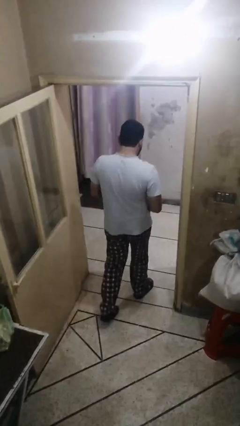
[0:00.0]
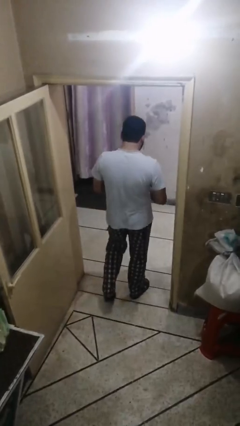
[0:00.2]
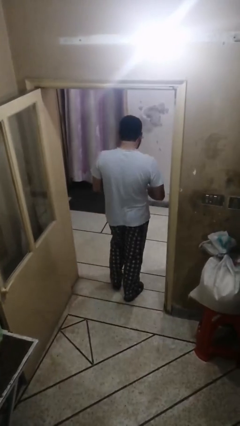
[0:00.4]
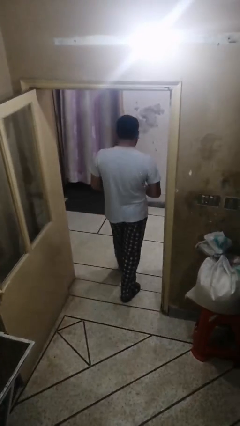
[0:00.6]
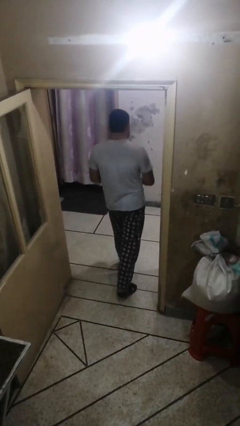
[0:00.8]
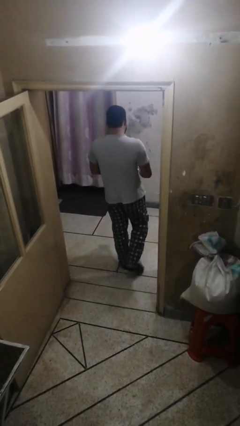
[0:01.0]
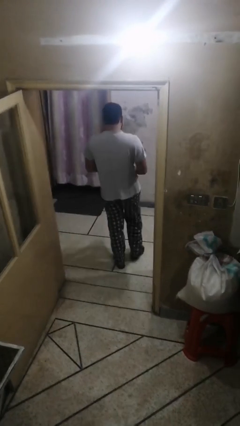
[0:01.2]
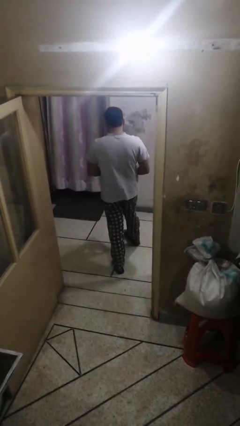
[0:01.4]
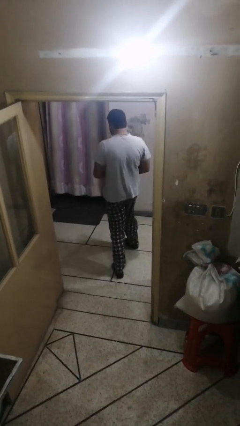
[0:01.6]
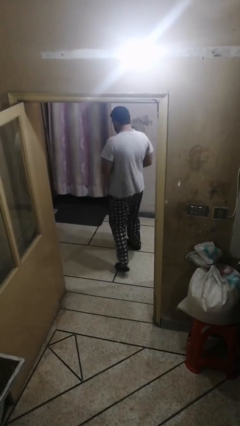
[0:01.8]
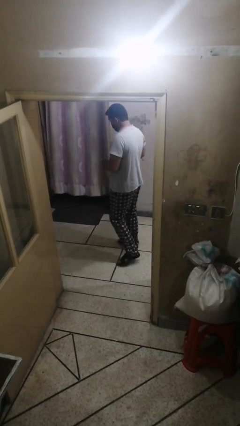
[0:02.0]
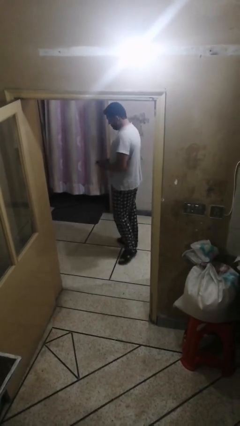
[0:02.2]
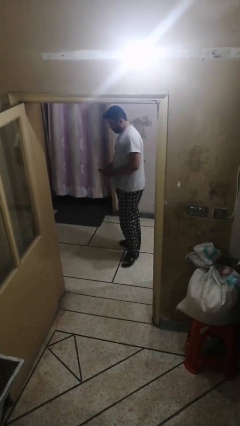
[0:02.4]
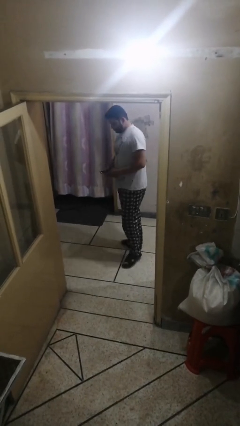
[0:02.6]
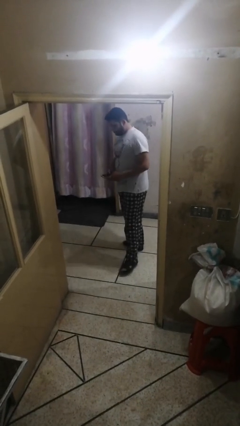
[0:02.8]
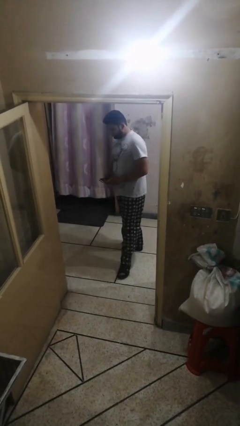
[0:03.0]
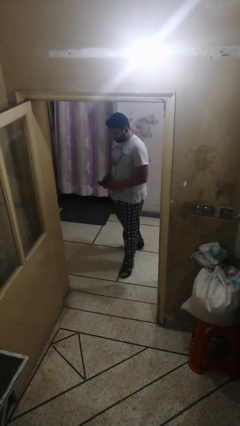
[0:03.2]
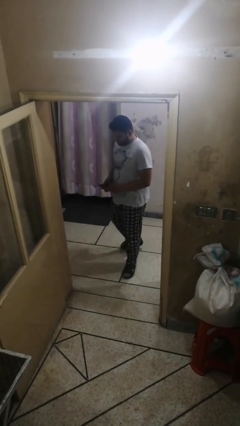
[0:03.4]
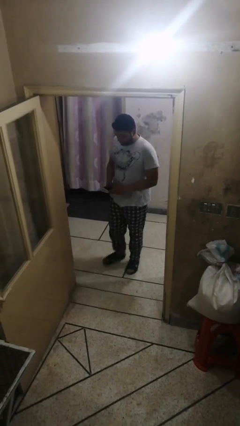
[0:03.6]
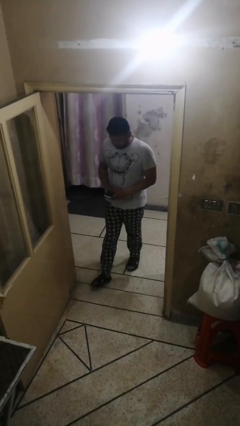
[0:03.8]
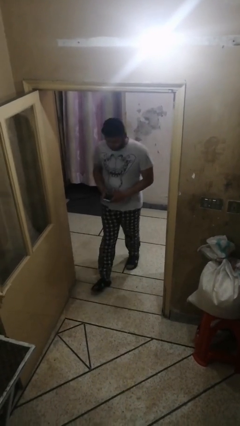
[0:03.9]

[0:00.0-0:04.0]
person exits scene through structure

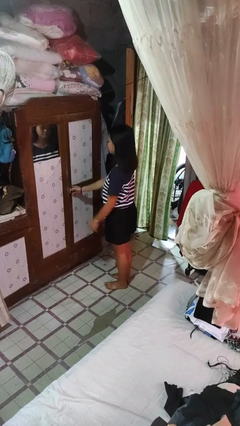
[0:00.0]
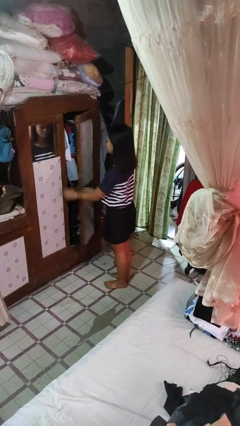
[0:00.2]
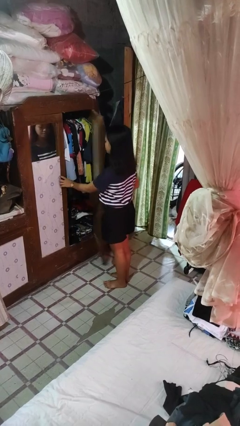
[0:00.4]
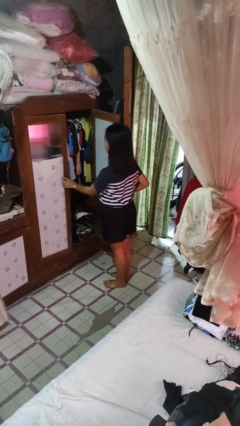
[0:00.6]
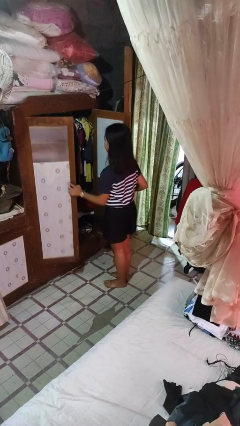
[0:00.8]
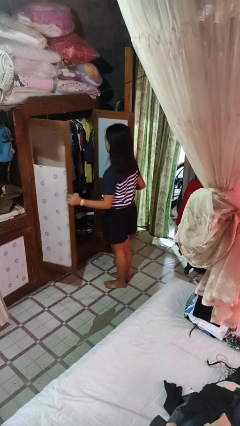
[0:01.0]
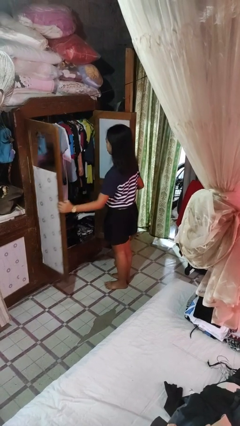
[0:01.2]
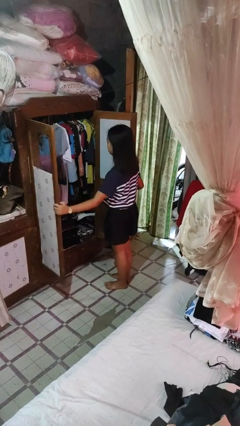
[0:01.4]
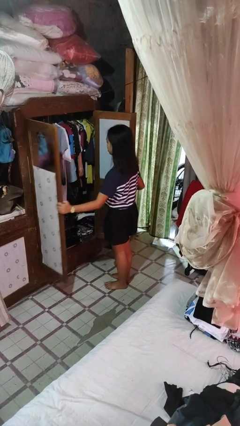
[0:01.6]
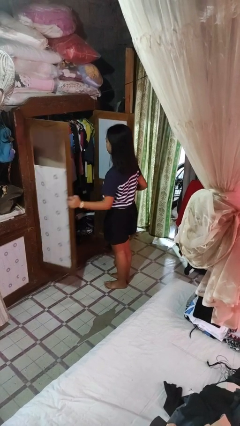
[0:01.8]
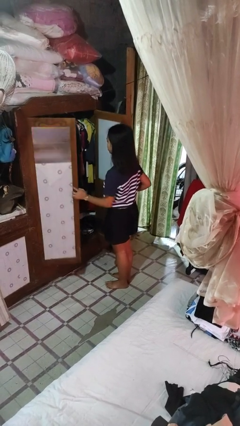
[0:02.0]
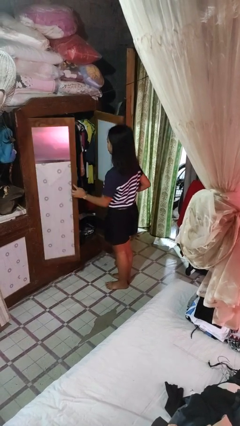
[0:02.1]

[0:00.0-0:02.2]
person opens closet door

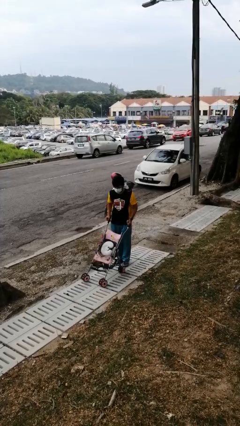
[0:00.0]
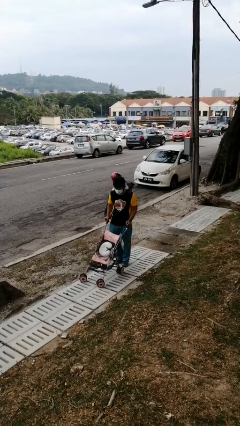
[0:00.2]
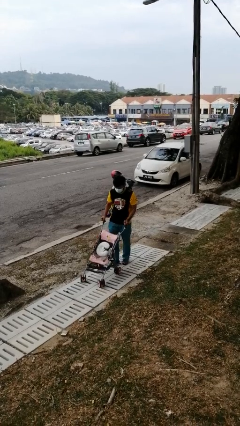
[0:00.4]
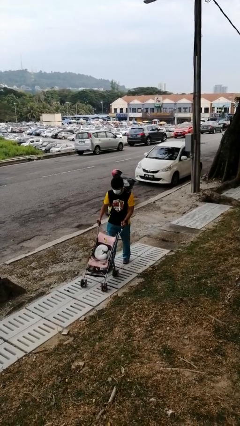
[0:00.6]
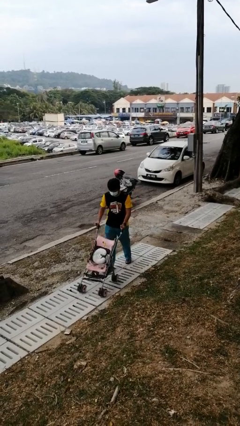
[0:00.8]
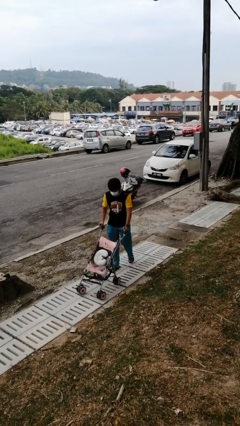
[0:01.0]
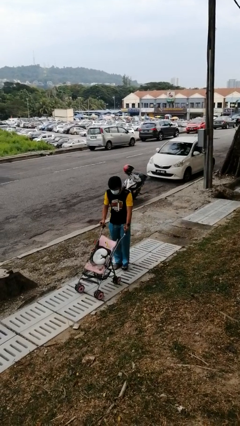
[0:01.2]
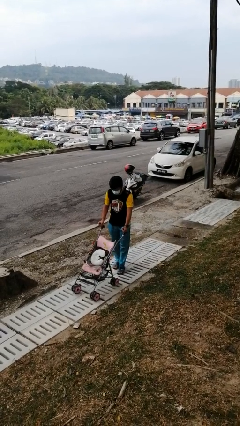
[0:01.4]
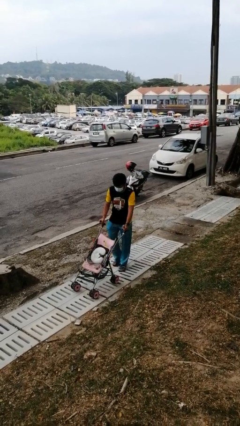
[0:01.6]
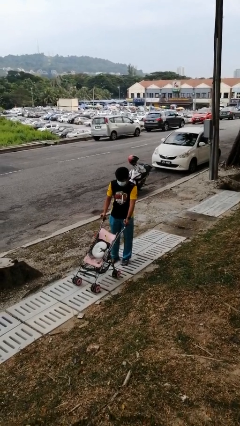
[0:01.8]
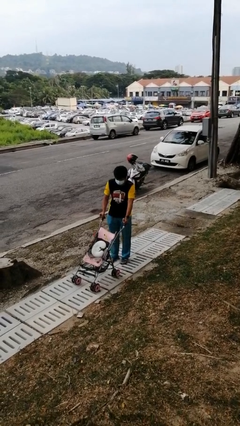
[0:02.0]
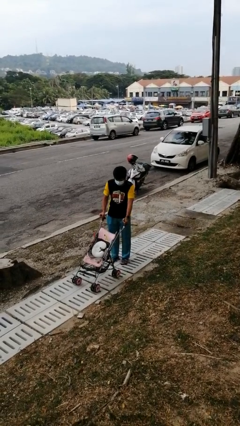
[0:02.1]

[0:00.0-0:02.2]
person pushes wheeled cart

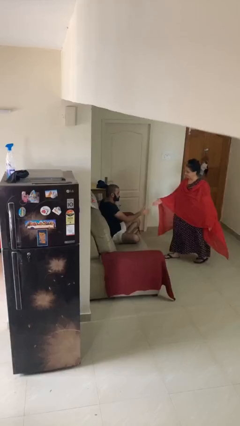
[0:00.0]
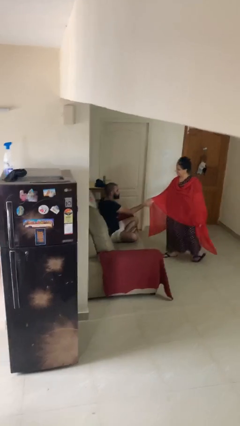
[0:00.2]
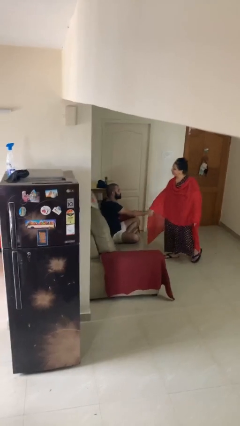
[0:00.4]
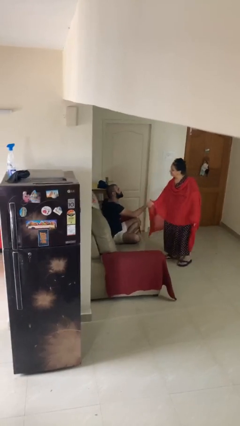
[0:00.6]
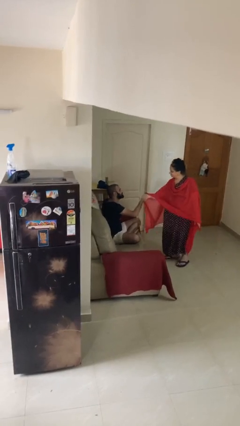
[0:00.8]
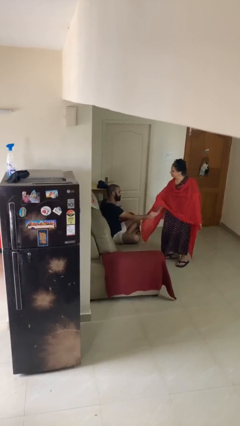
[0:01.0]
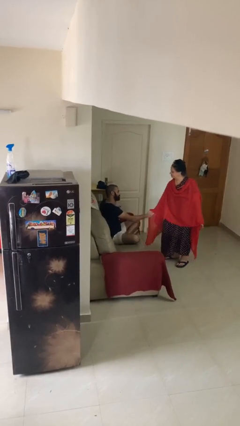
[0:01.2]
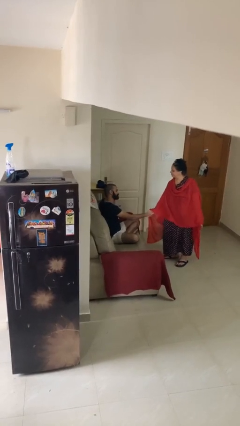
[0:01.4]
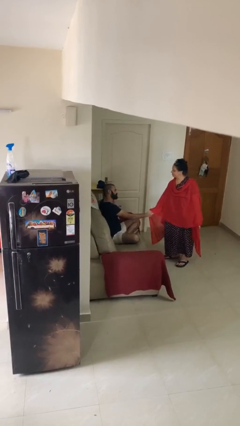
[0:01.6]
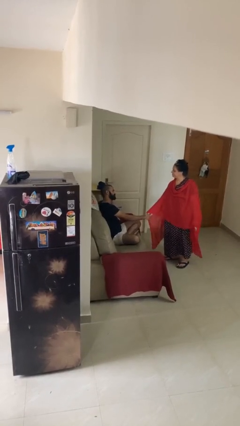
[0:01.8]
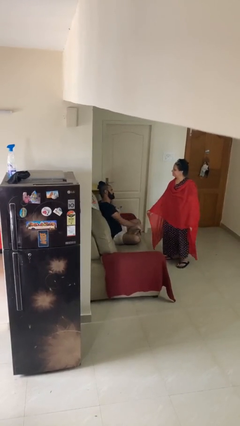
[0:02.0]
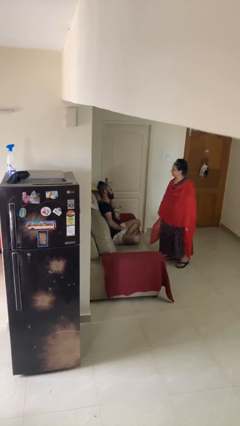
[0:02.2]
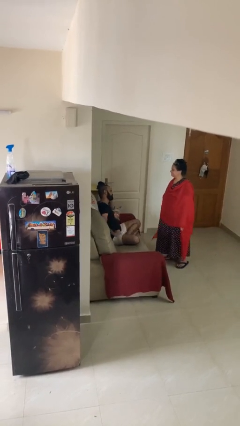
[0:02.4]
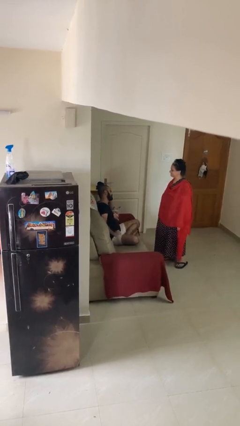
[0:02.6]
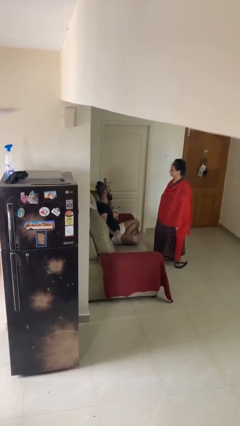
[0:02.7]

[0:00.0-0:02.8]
person shakes hand

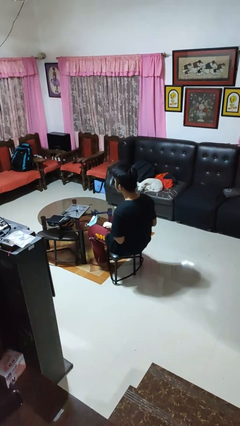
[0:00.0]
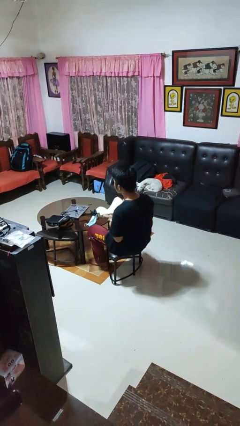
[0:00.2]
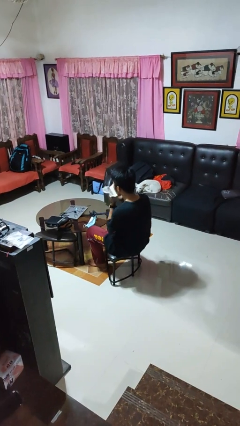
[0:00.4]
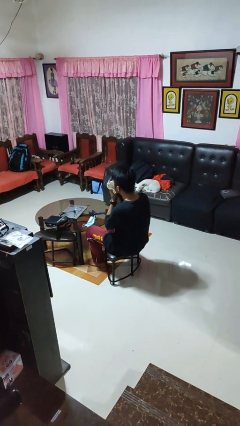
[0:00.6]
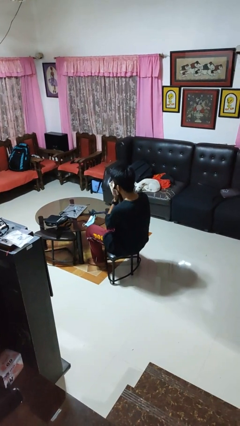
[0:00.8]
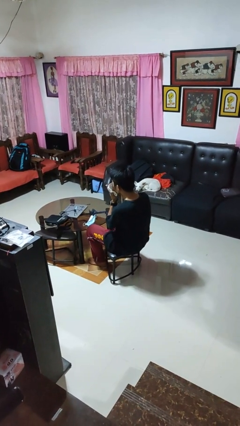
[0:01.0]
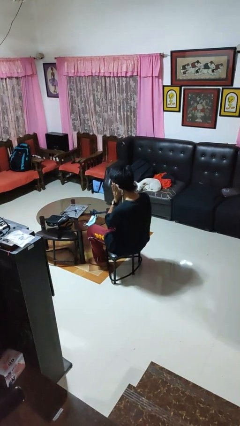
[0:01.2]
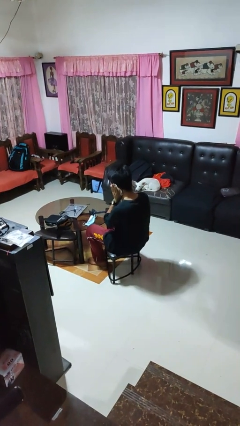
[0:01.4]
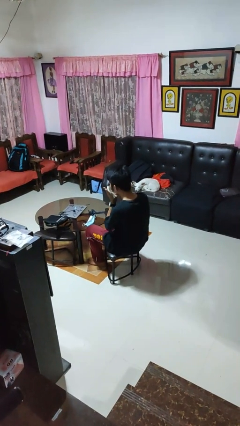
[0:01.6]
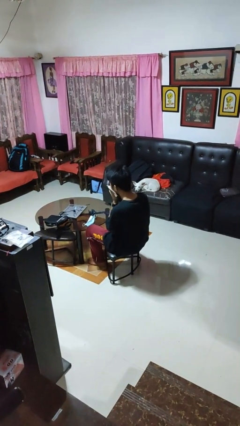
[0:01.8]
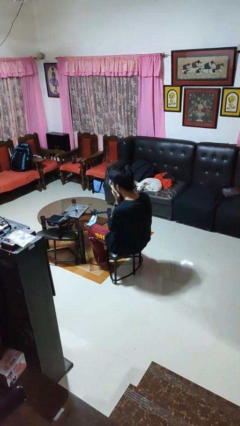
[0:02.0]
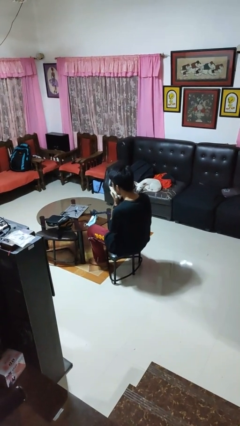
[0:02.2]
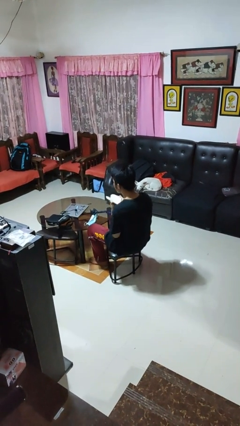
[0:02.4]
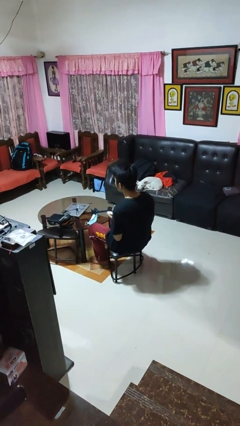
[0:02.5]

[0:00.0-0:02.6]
person wipes mouth with napkin

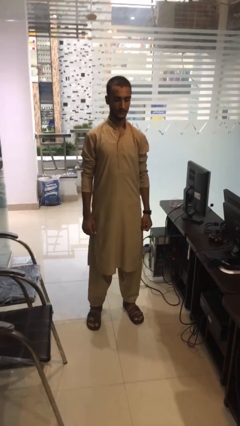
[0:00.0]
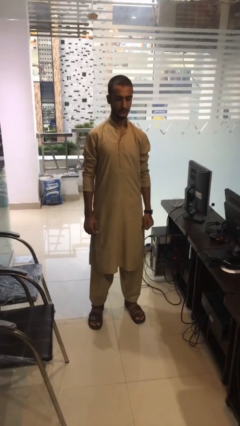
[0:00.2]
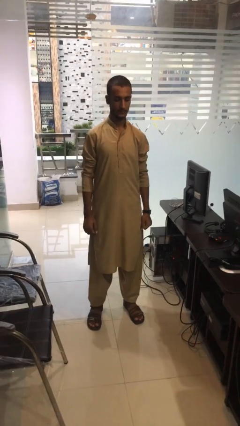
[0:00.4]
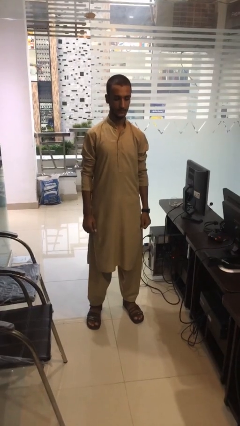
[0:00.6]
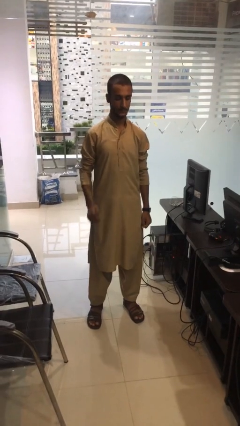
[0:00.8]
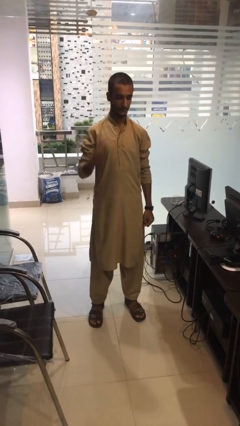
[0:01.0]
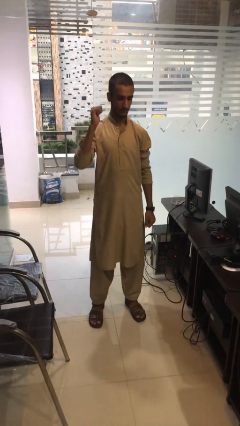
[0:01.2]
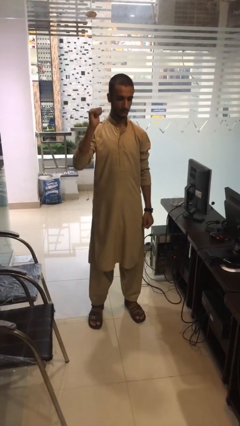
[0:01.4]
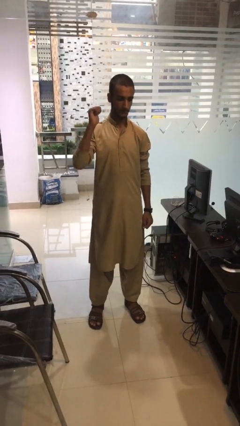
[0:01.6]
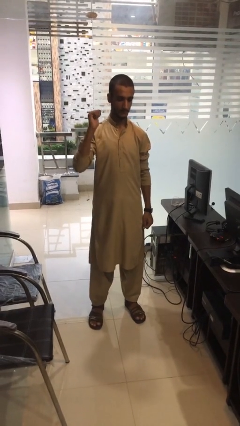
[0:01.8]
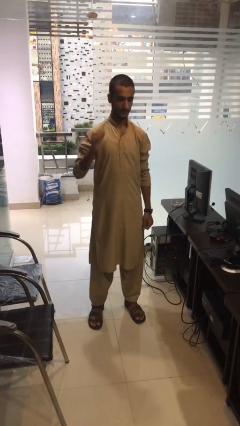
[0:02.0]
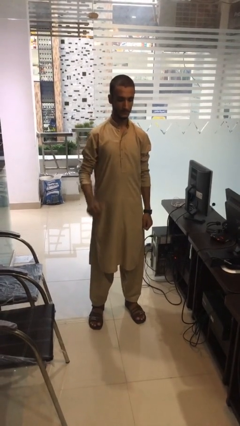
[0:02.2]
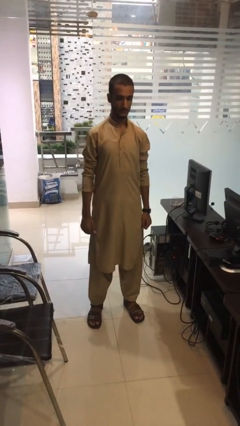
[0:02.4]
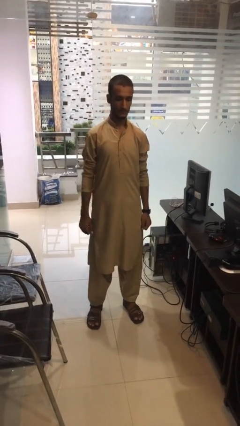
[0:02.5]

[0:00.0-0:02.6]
person gestures behind me

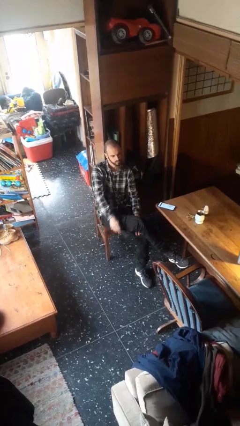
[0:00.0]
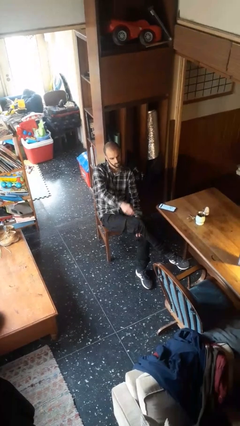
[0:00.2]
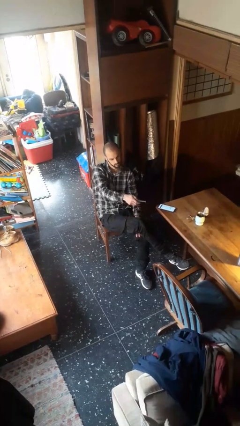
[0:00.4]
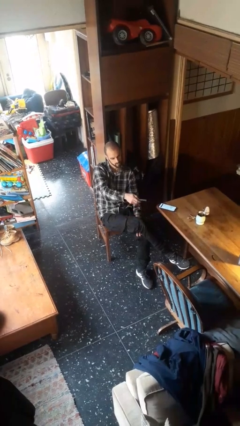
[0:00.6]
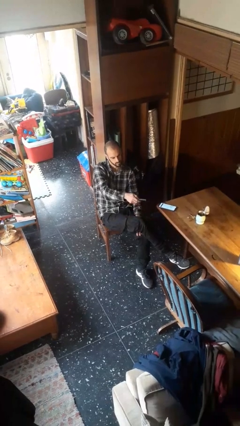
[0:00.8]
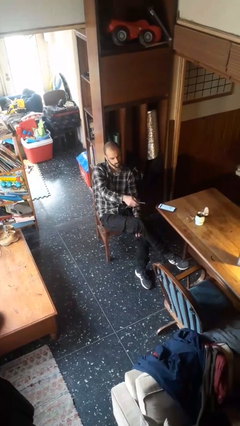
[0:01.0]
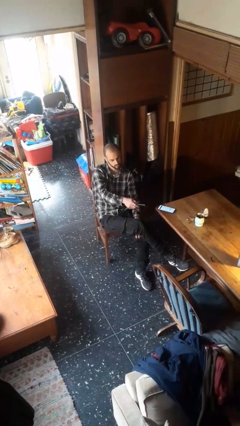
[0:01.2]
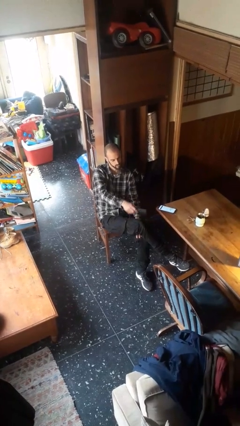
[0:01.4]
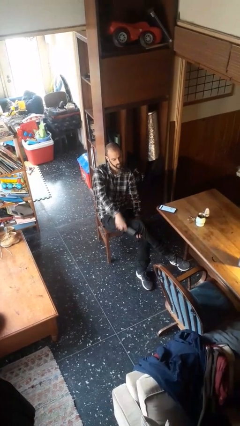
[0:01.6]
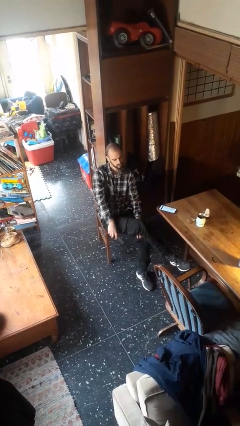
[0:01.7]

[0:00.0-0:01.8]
person uses television remote
